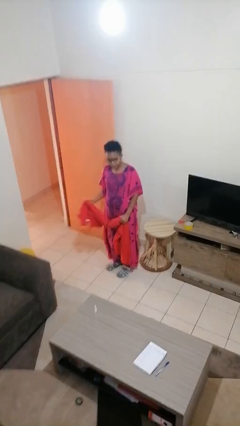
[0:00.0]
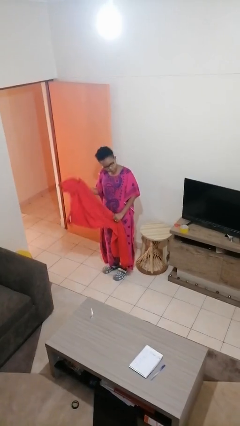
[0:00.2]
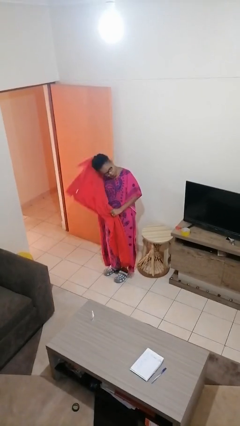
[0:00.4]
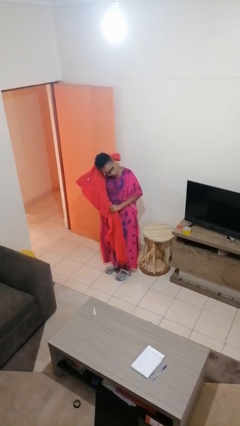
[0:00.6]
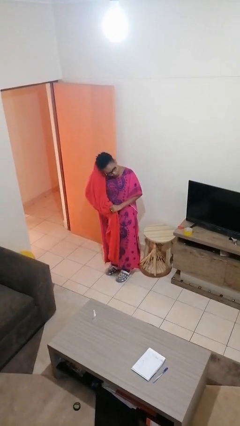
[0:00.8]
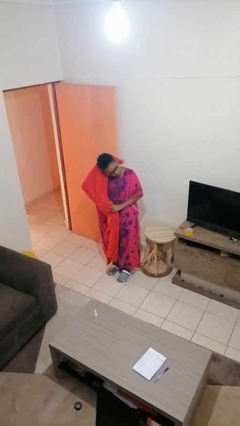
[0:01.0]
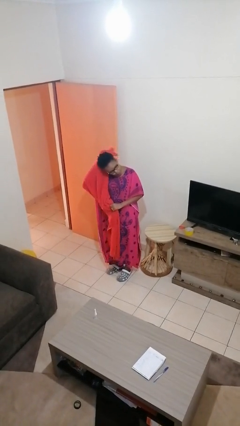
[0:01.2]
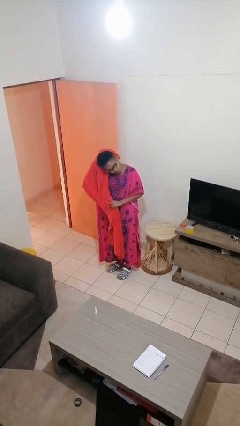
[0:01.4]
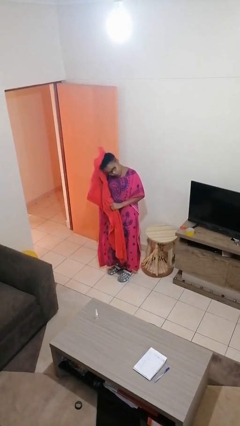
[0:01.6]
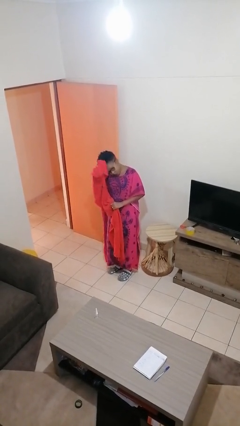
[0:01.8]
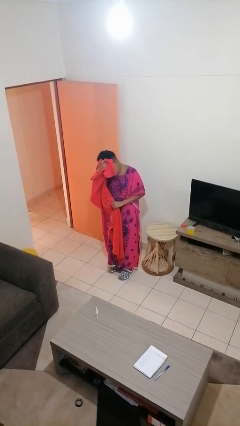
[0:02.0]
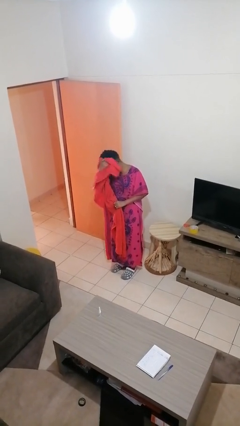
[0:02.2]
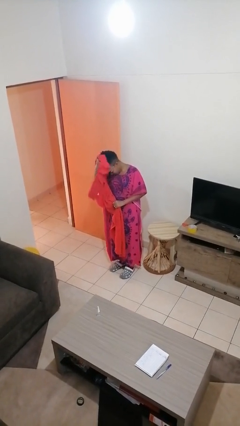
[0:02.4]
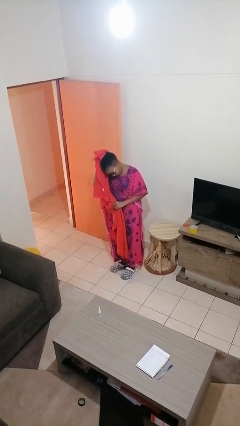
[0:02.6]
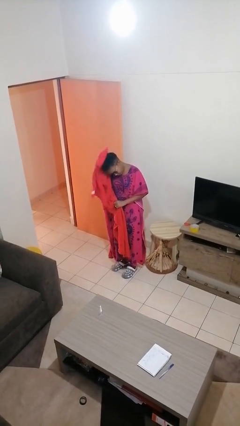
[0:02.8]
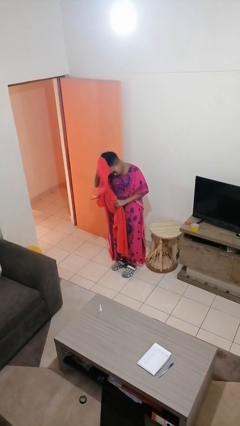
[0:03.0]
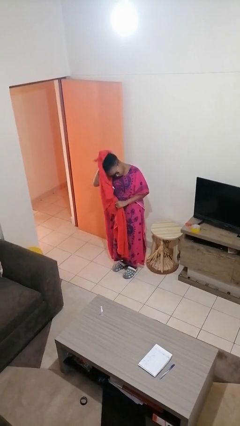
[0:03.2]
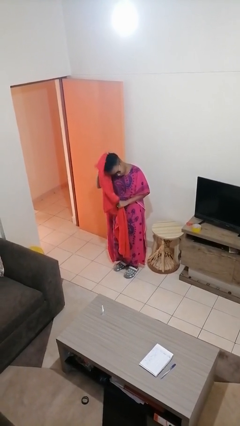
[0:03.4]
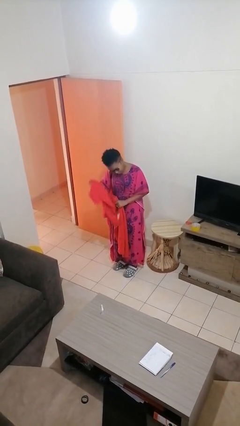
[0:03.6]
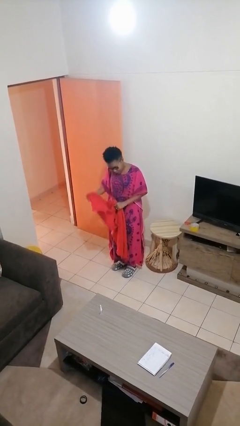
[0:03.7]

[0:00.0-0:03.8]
person dries hair with towel

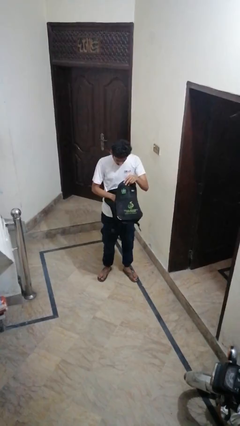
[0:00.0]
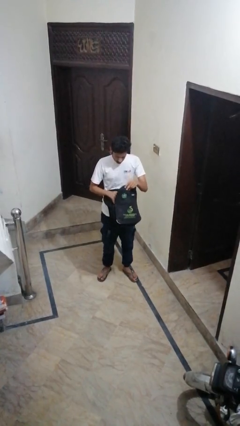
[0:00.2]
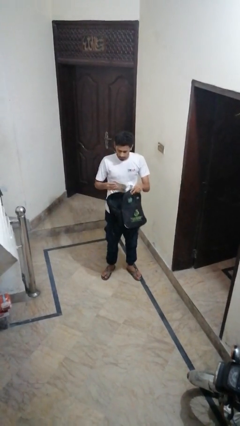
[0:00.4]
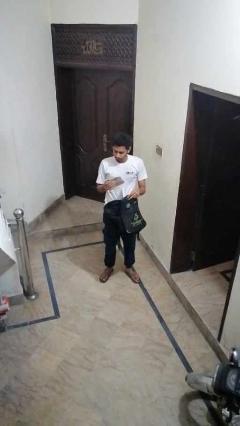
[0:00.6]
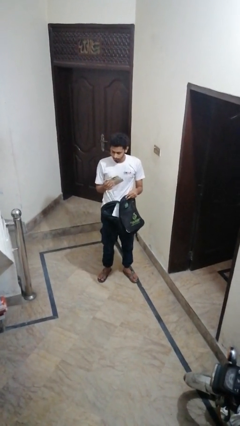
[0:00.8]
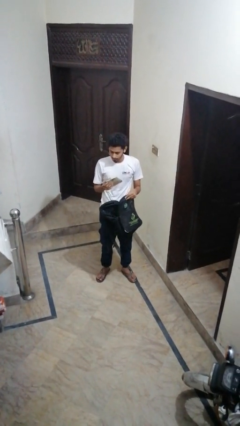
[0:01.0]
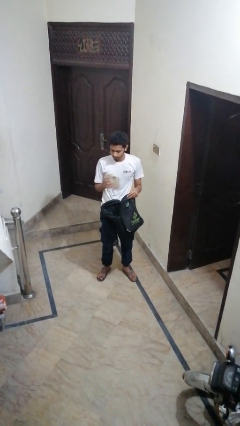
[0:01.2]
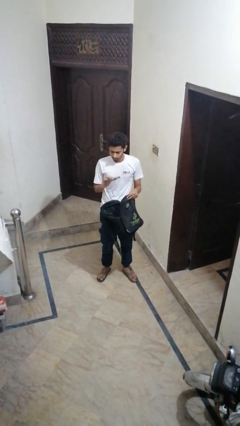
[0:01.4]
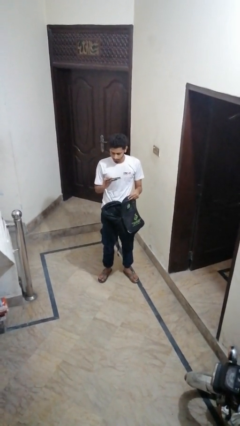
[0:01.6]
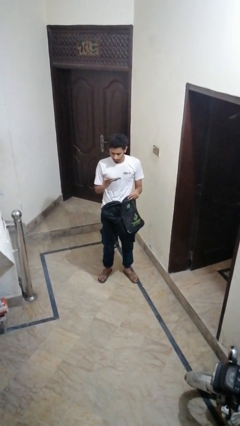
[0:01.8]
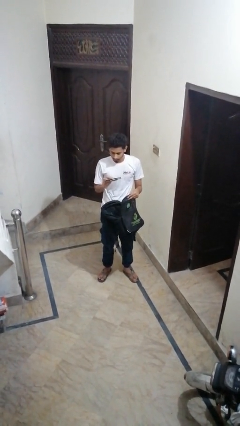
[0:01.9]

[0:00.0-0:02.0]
person takes object from backpack

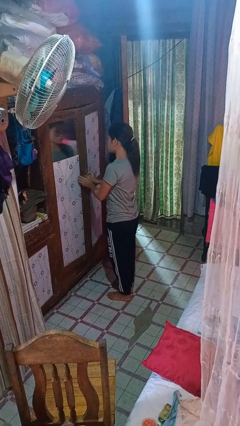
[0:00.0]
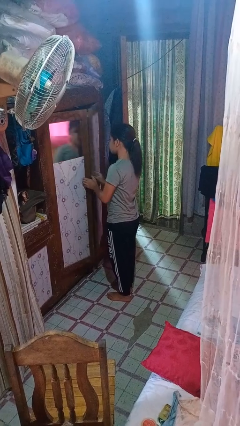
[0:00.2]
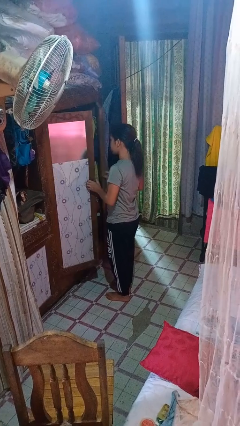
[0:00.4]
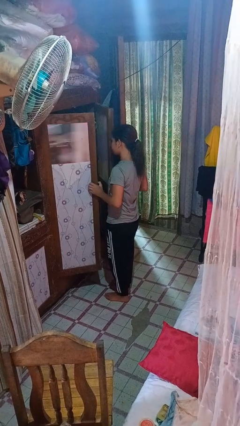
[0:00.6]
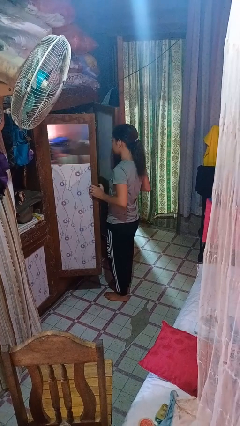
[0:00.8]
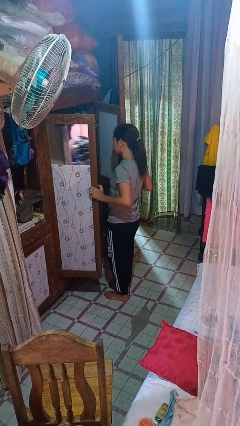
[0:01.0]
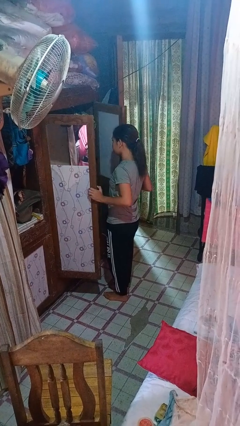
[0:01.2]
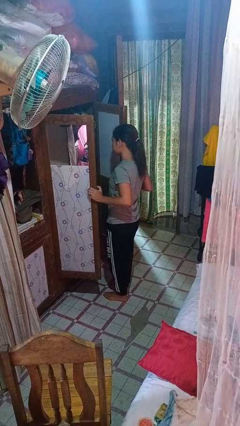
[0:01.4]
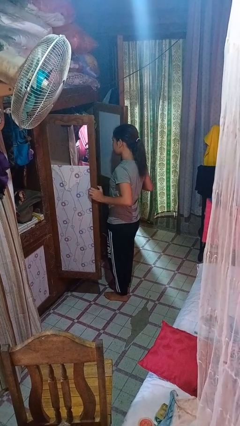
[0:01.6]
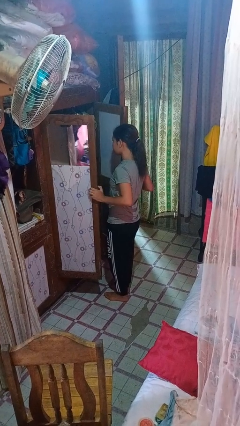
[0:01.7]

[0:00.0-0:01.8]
person opens closet door

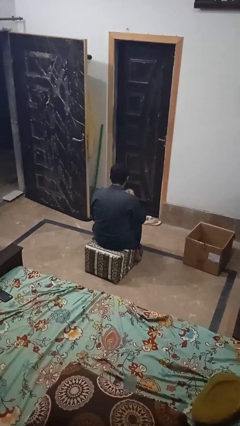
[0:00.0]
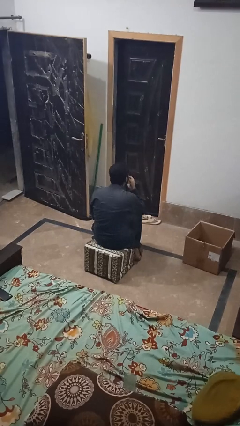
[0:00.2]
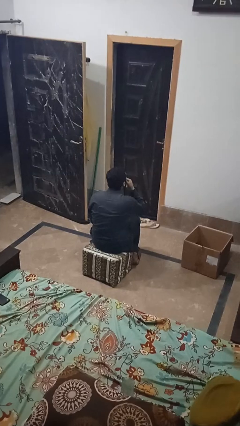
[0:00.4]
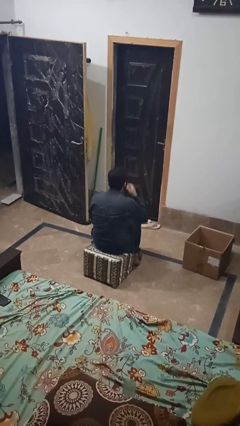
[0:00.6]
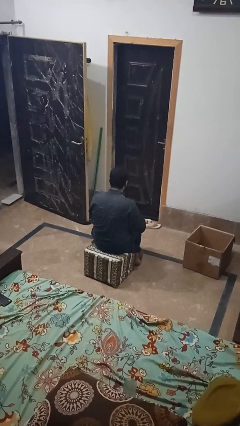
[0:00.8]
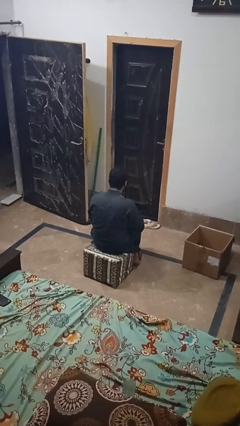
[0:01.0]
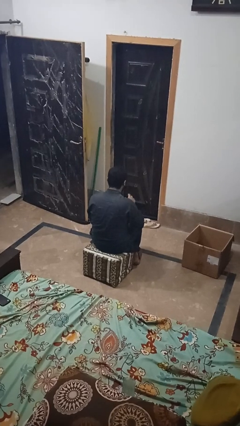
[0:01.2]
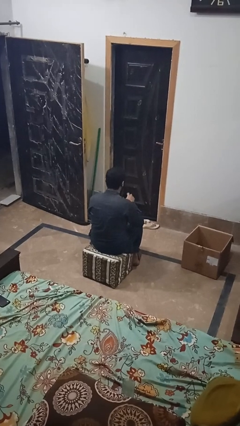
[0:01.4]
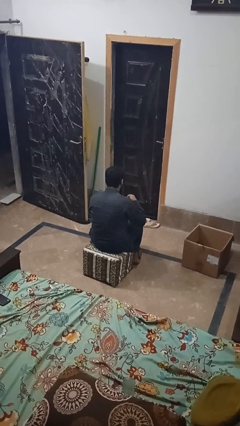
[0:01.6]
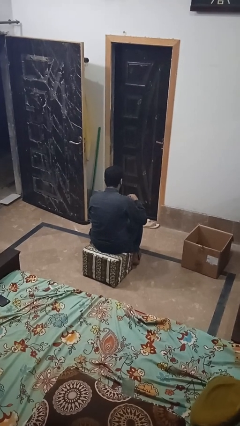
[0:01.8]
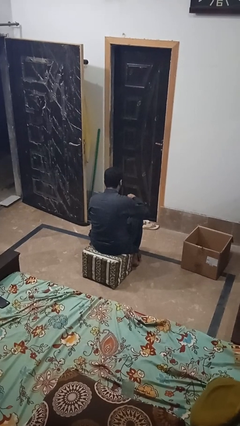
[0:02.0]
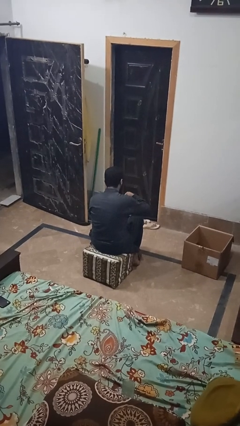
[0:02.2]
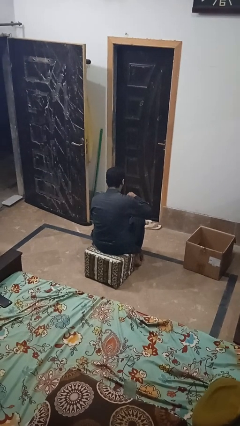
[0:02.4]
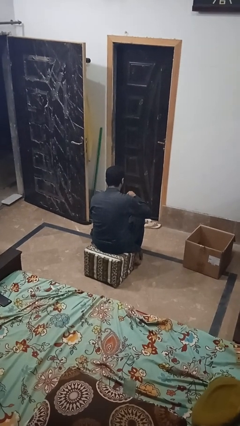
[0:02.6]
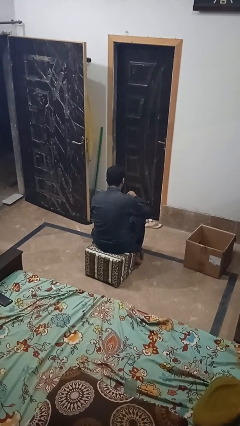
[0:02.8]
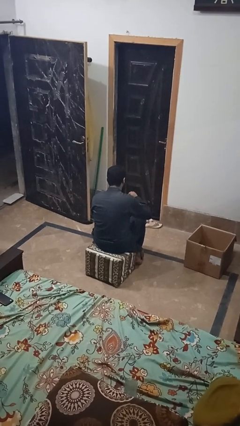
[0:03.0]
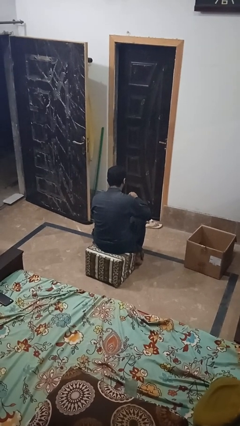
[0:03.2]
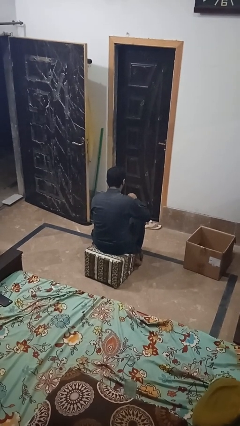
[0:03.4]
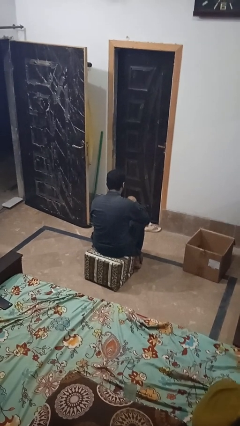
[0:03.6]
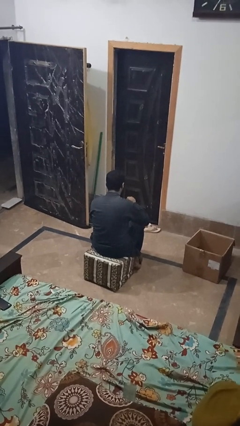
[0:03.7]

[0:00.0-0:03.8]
person stirs mug

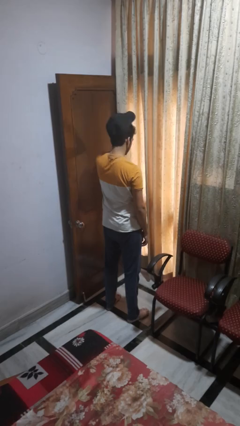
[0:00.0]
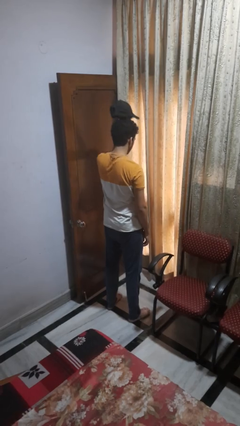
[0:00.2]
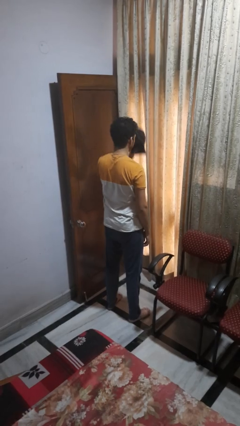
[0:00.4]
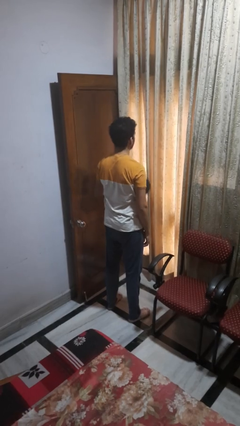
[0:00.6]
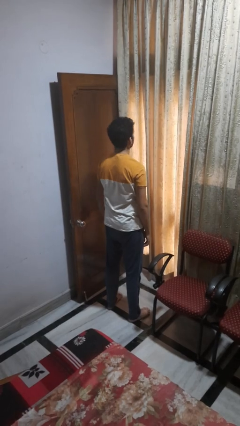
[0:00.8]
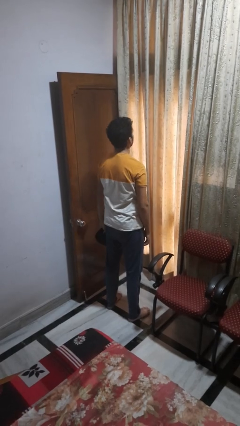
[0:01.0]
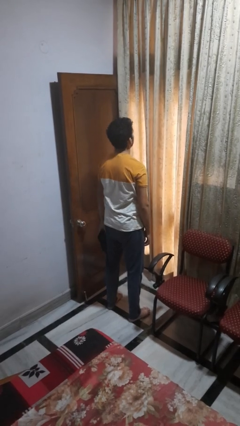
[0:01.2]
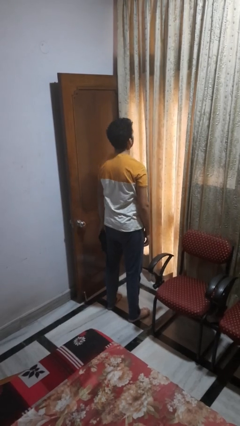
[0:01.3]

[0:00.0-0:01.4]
person takes off hat

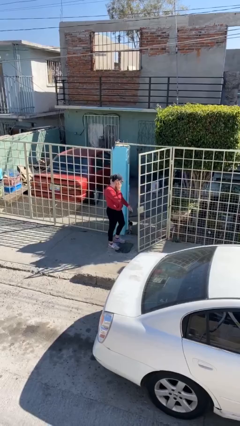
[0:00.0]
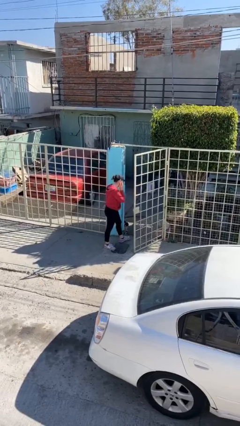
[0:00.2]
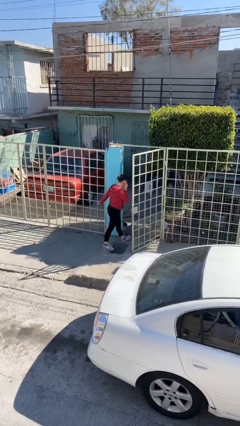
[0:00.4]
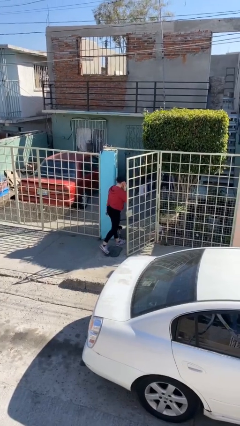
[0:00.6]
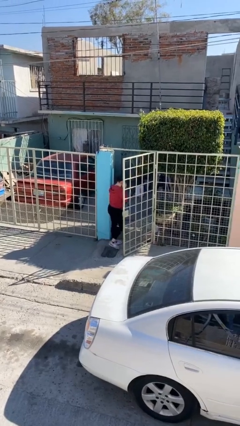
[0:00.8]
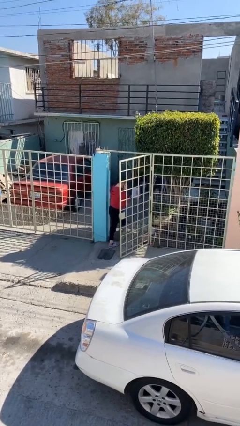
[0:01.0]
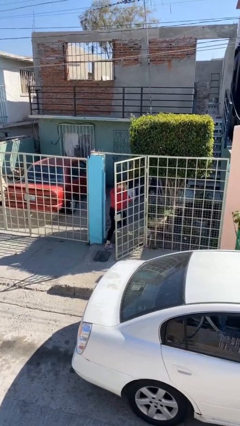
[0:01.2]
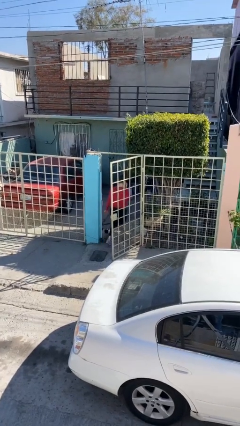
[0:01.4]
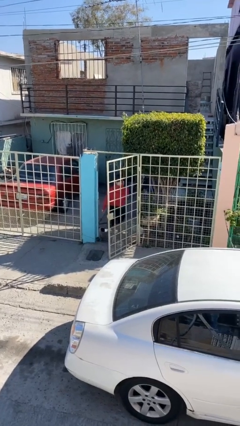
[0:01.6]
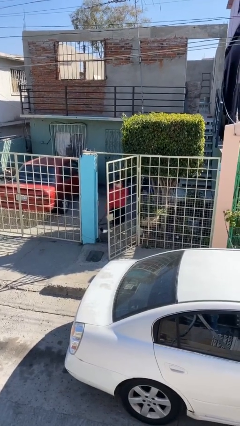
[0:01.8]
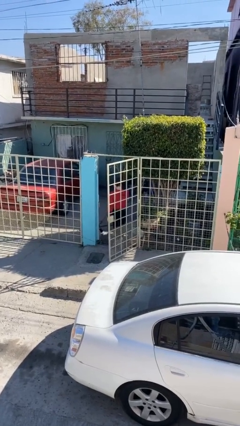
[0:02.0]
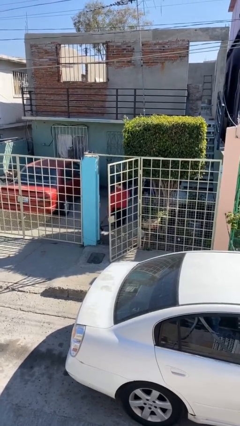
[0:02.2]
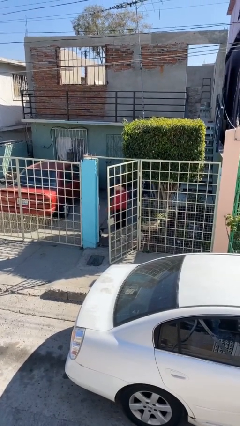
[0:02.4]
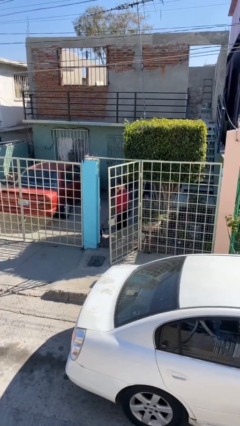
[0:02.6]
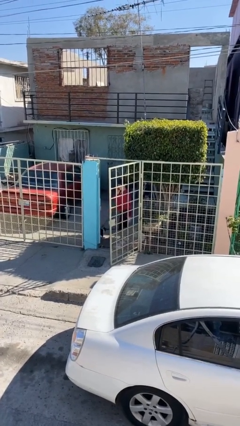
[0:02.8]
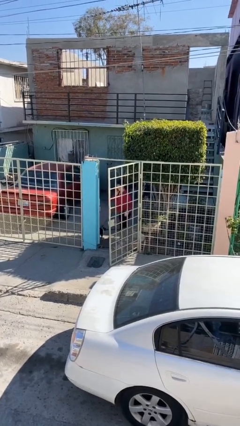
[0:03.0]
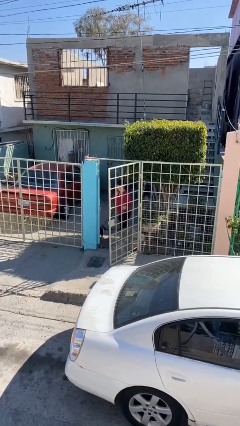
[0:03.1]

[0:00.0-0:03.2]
person exits scene through structure

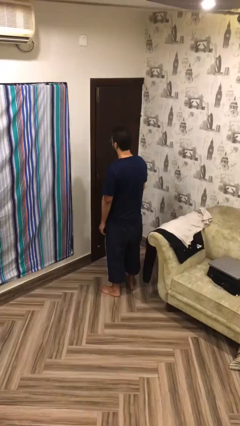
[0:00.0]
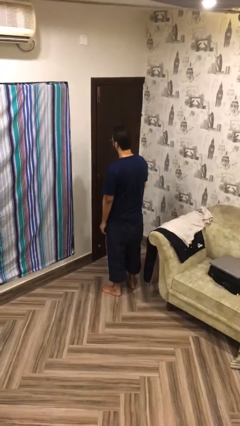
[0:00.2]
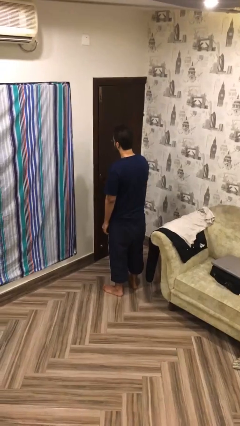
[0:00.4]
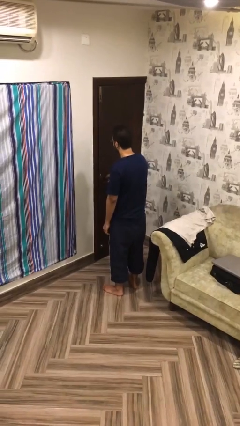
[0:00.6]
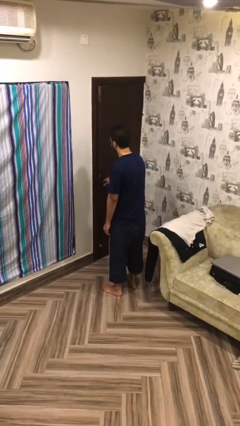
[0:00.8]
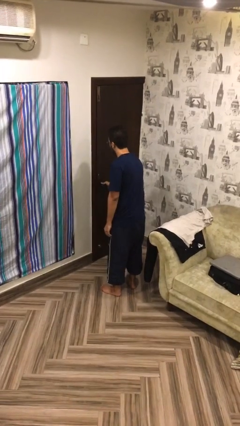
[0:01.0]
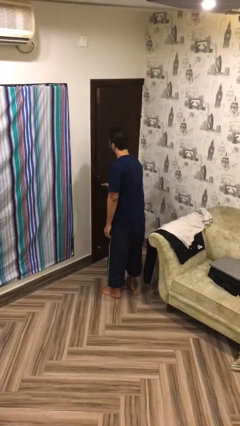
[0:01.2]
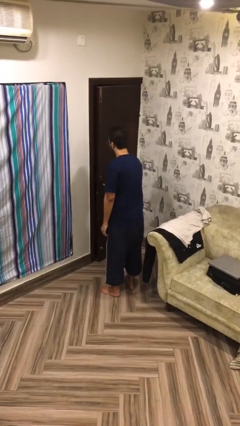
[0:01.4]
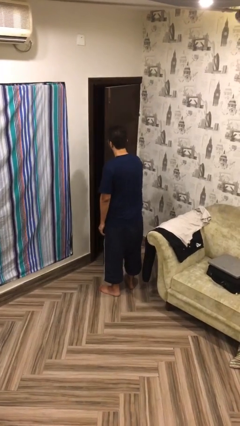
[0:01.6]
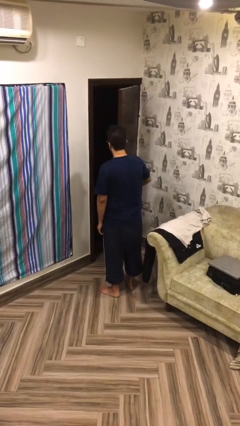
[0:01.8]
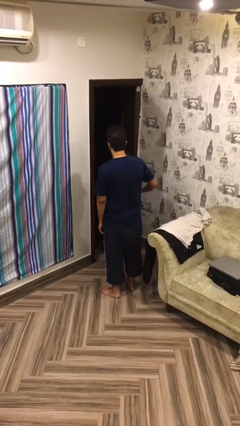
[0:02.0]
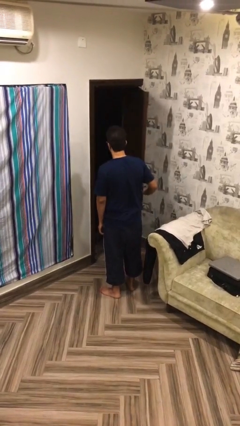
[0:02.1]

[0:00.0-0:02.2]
person opens facility door
